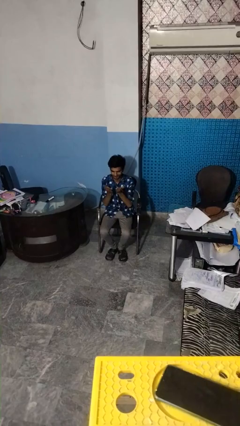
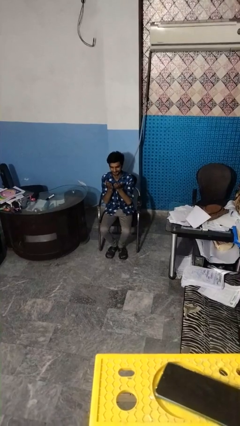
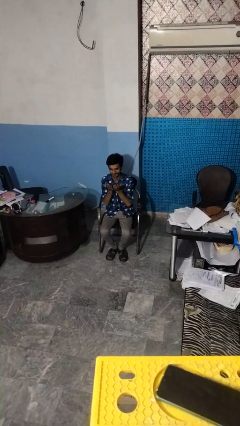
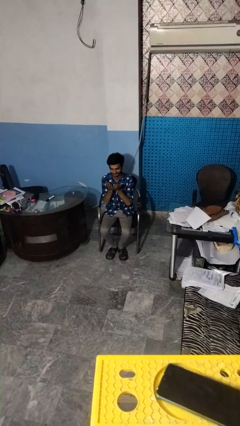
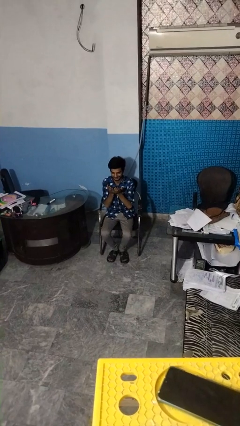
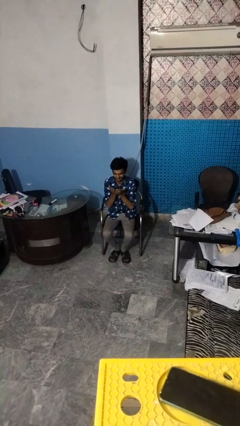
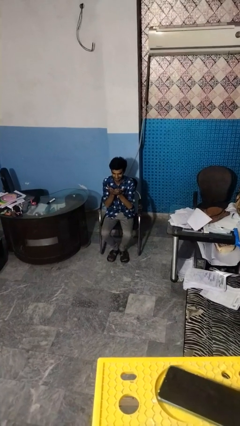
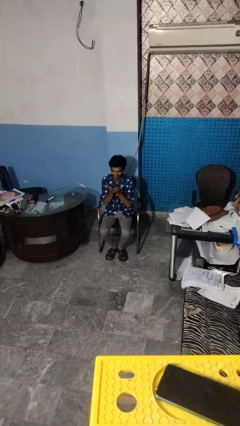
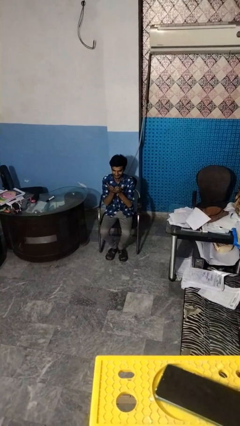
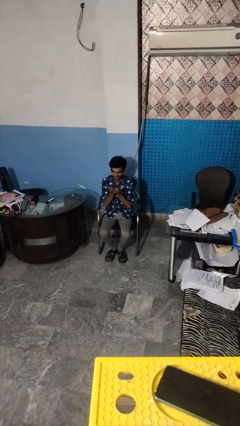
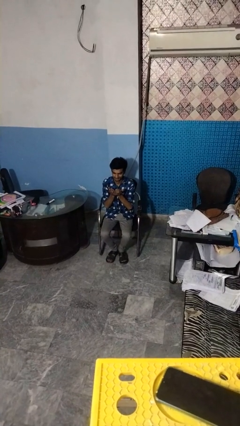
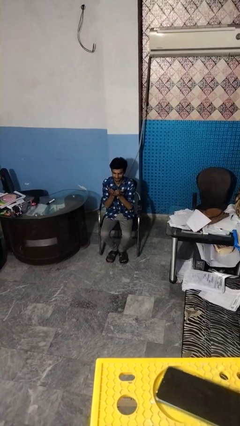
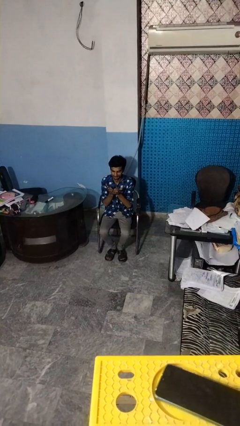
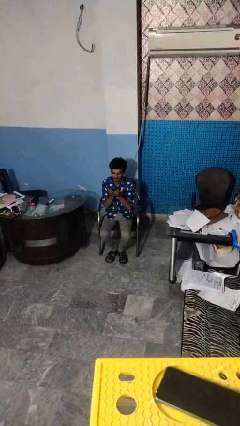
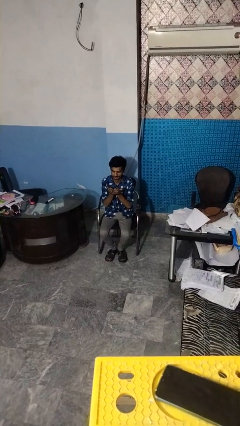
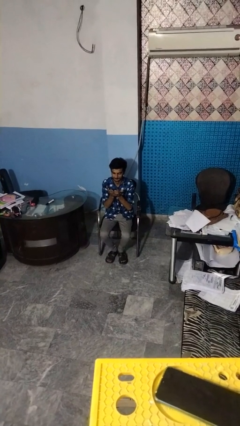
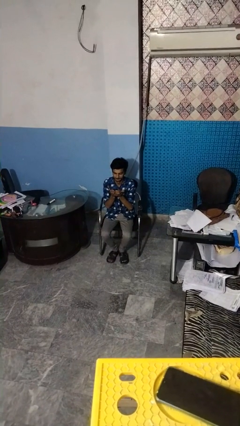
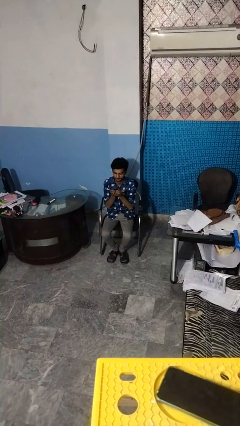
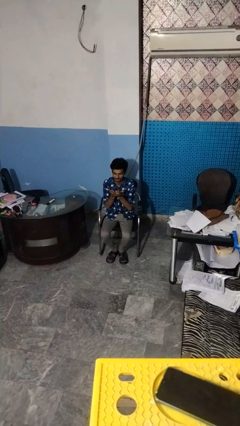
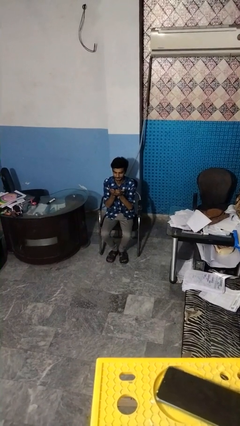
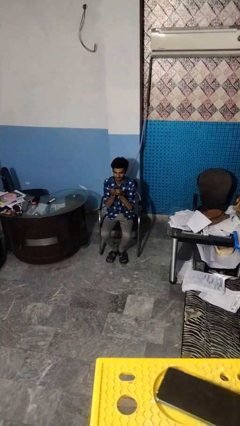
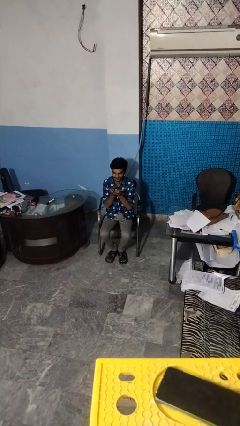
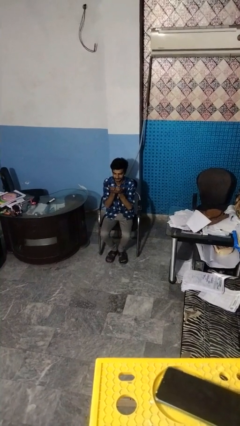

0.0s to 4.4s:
person prays

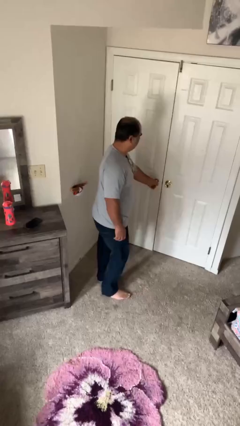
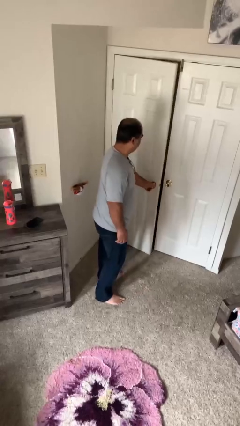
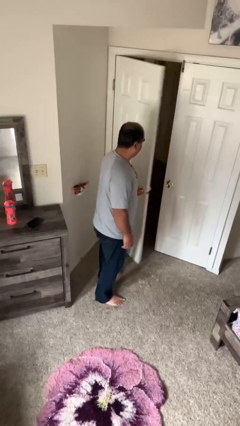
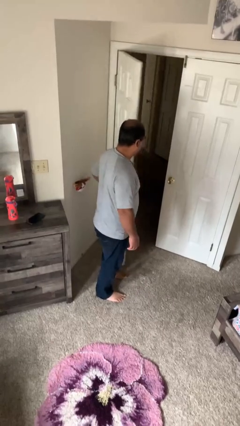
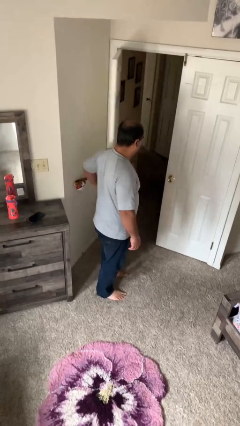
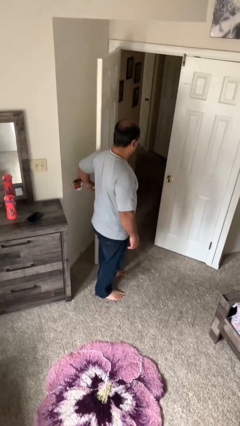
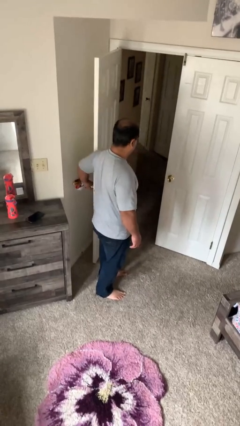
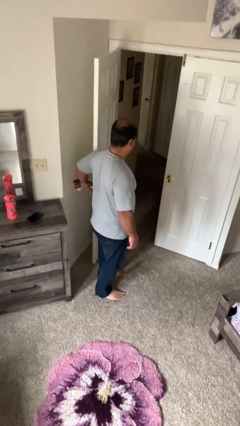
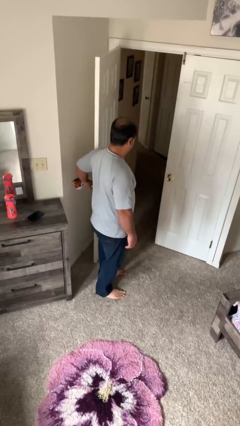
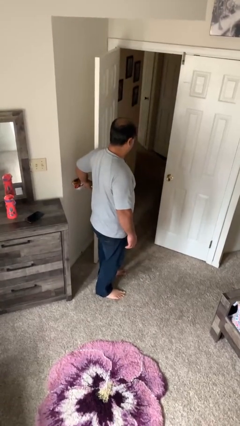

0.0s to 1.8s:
person opens facility door

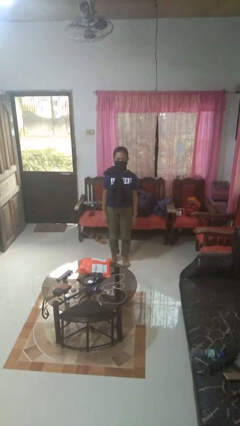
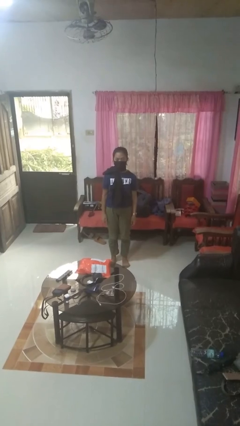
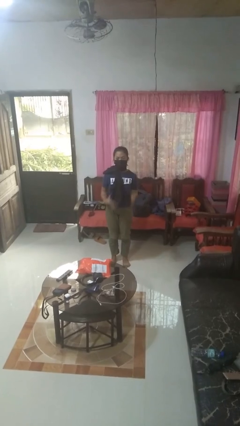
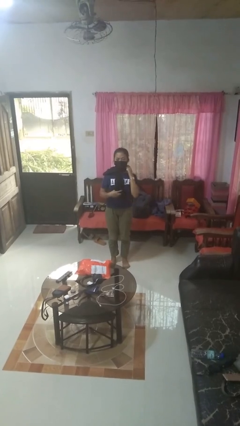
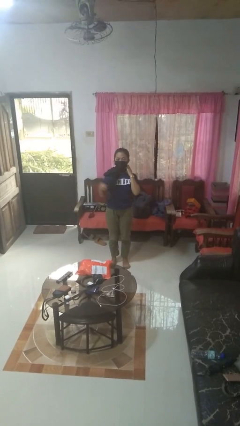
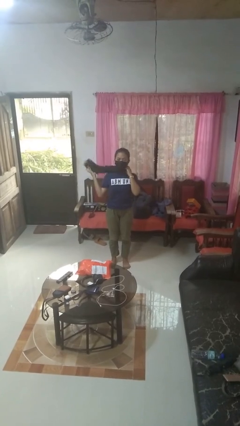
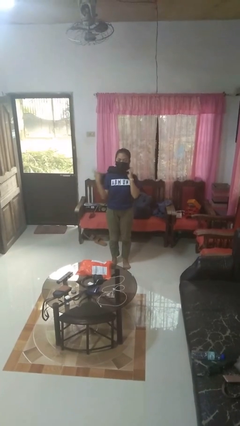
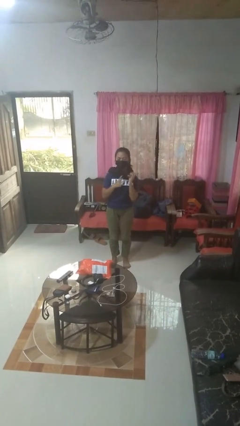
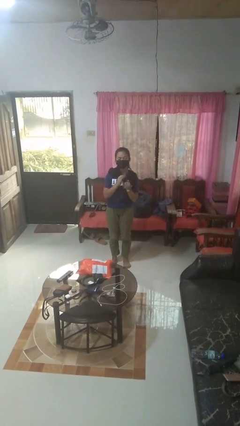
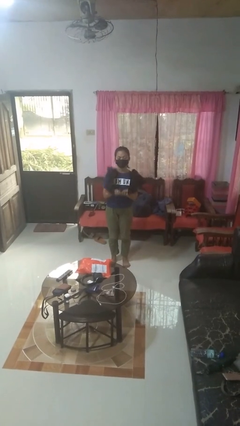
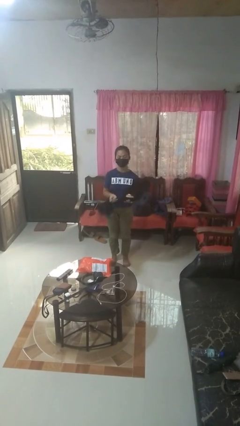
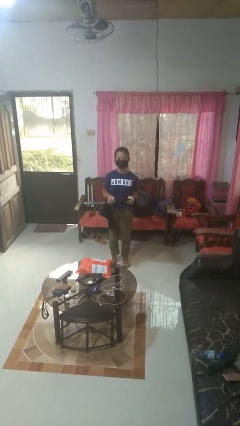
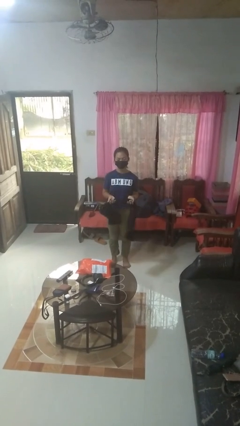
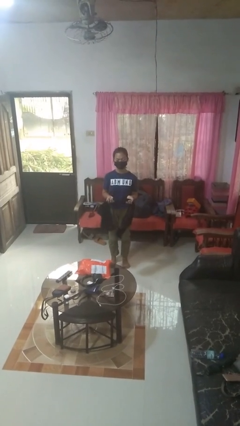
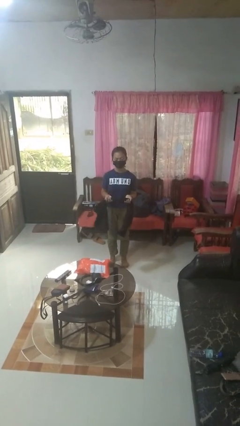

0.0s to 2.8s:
person takes off scarf

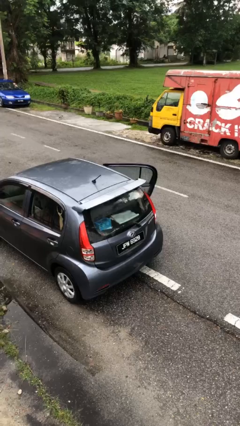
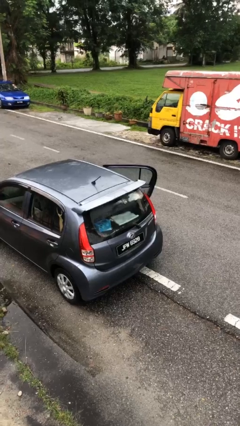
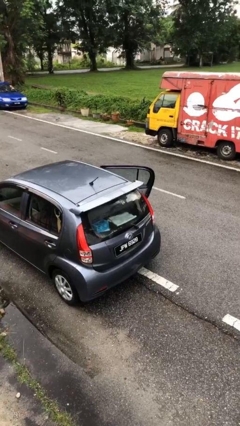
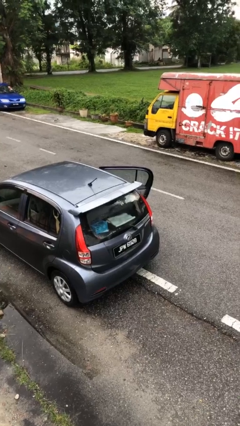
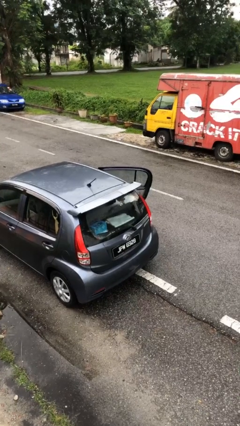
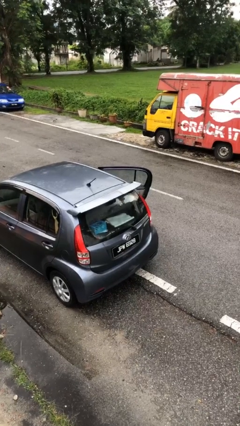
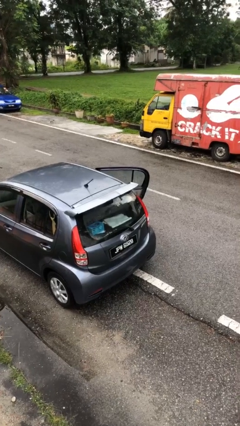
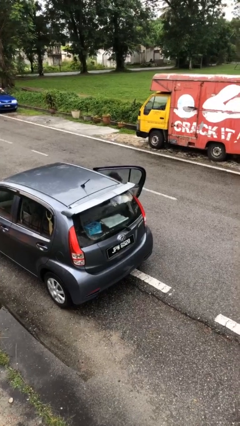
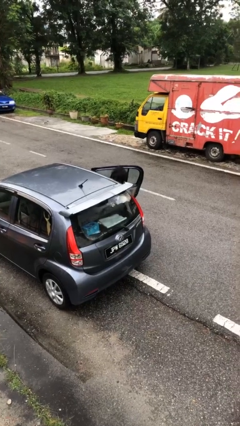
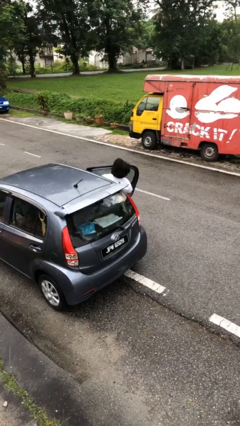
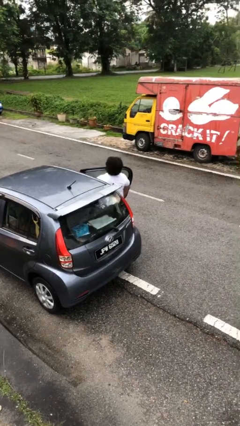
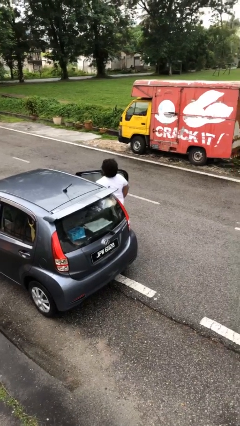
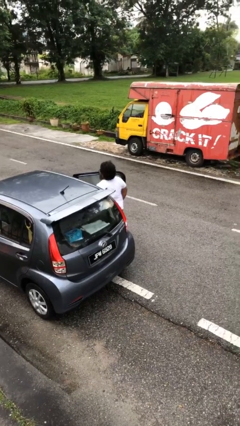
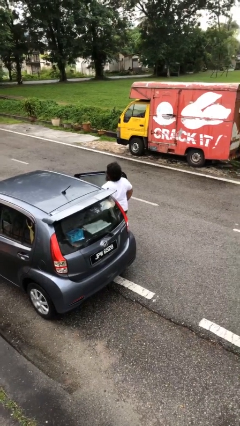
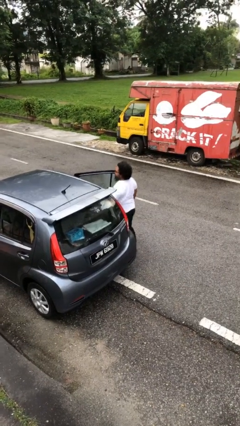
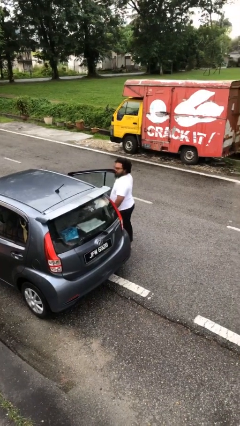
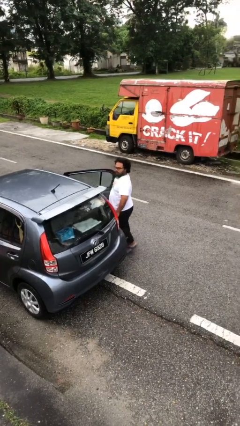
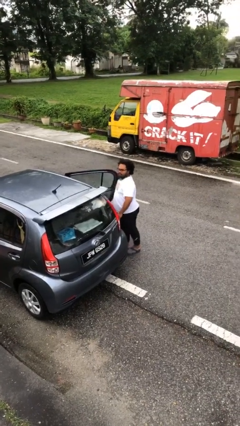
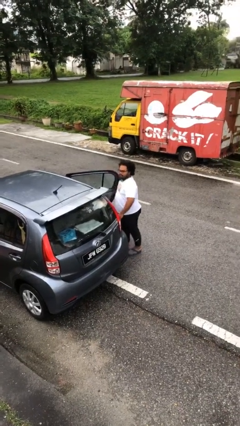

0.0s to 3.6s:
person exits car

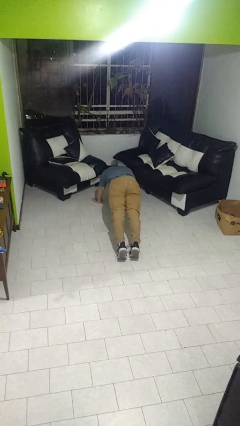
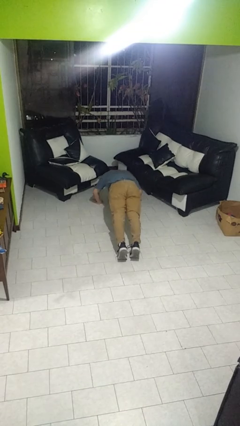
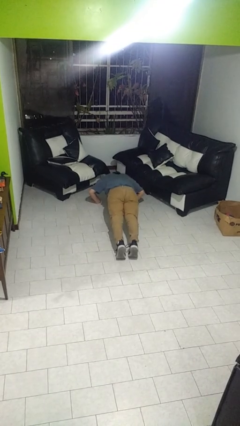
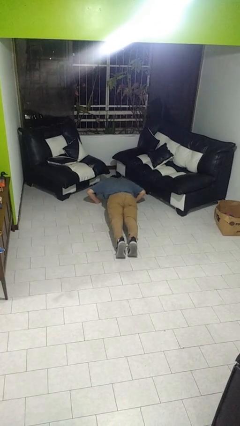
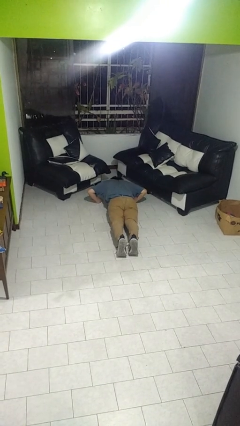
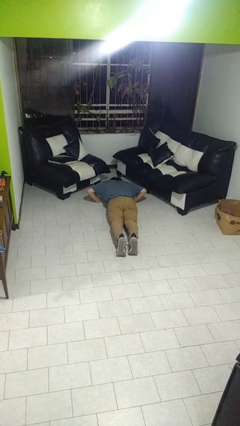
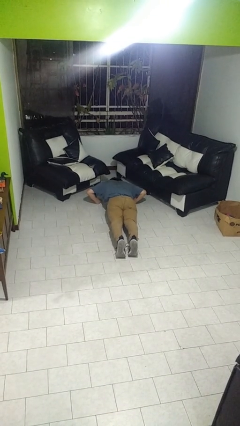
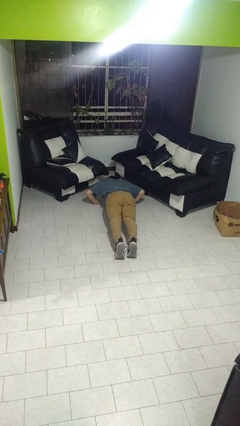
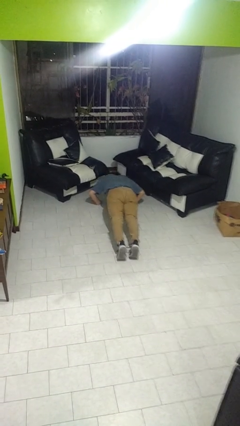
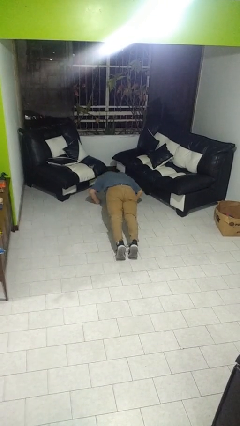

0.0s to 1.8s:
person exercises with pushup

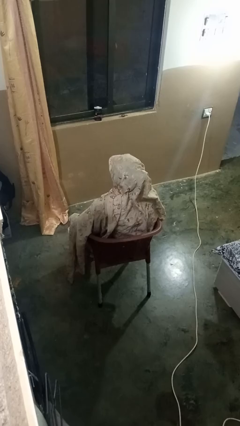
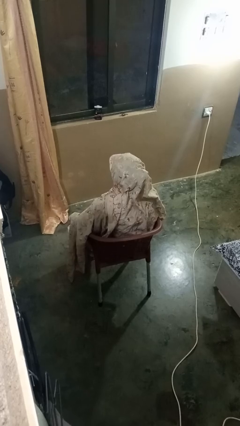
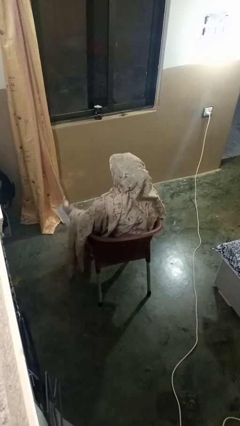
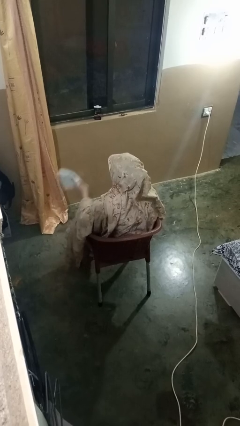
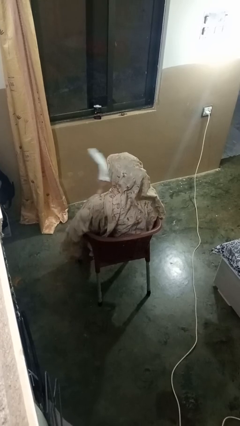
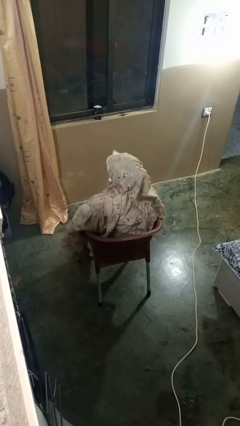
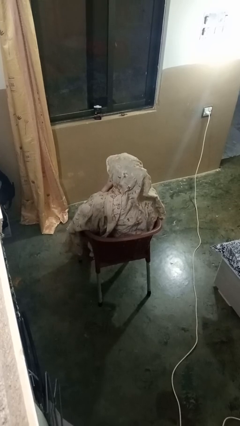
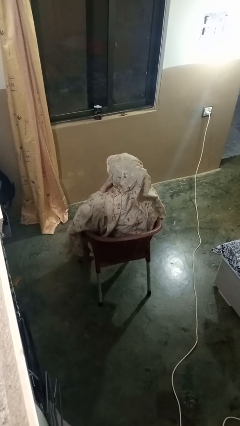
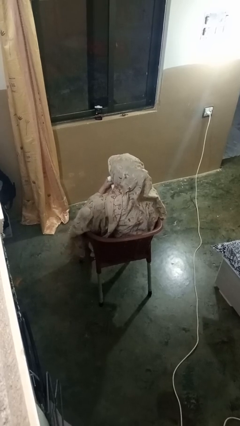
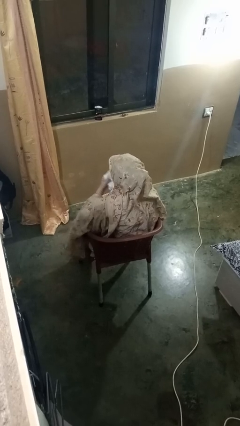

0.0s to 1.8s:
person wipes mouth with napkin

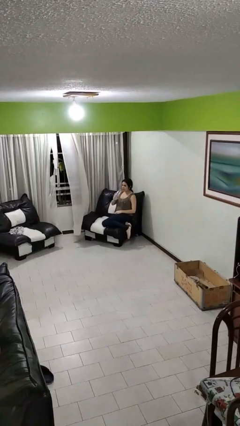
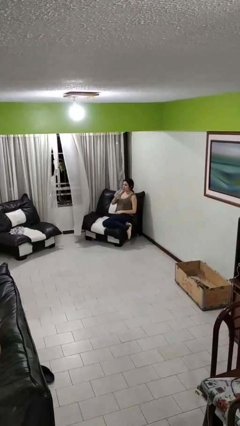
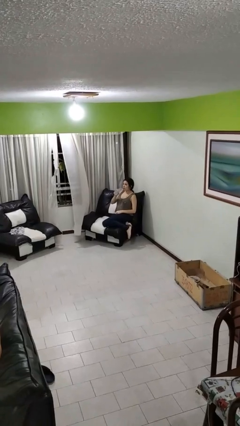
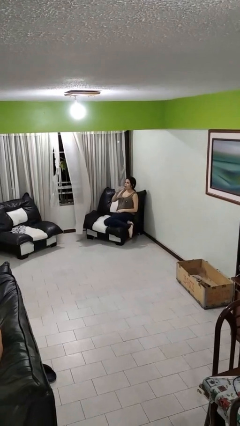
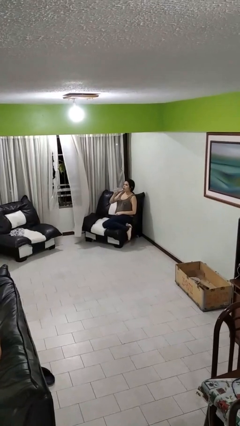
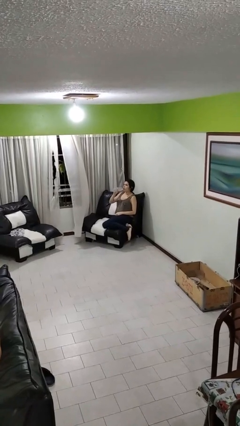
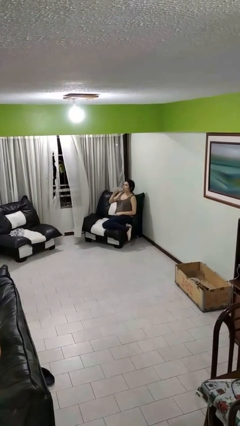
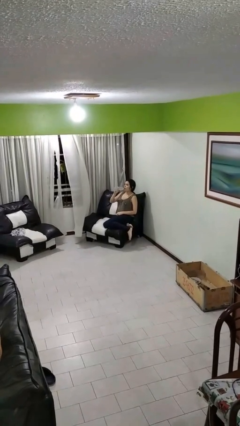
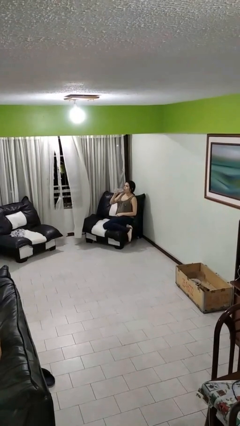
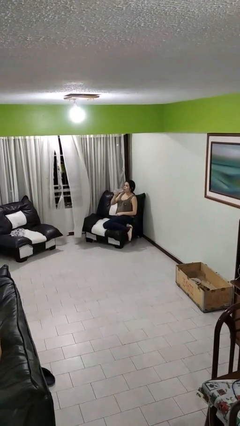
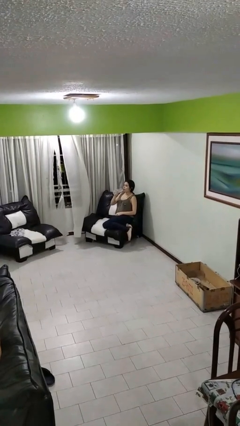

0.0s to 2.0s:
person drinks from bottle
